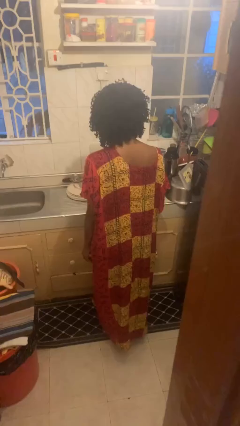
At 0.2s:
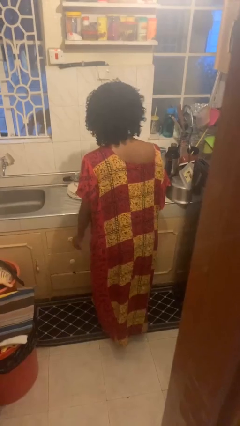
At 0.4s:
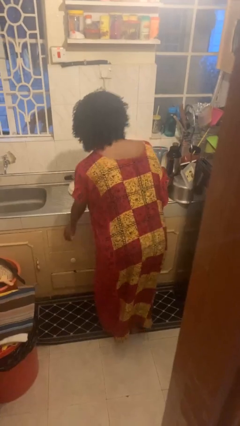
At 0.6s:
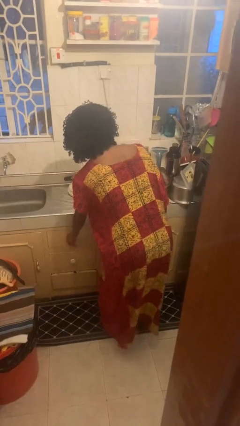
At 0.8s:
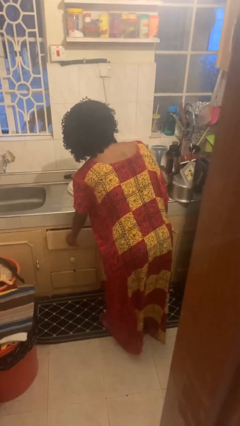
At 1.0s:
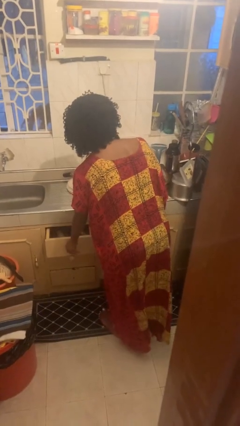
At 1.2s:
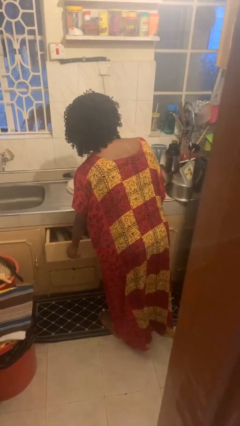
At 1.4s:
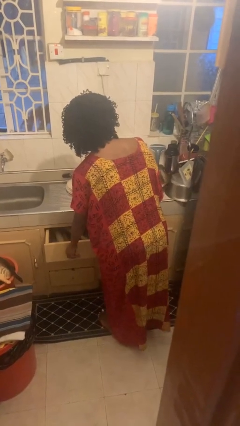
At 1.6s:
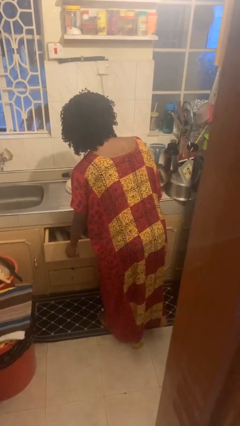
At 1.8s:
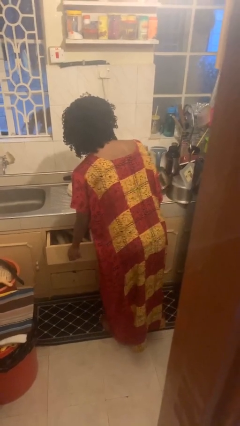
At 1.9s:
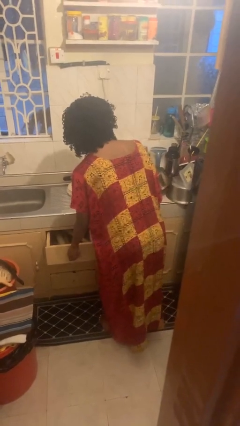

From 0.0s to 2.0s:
person opens kitchen drawer

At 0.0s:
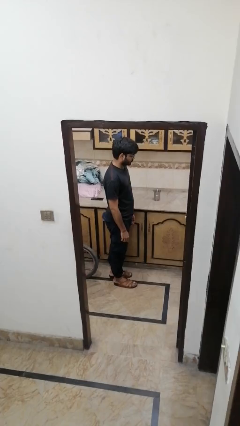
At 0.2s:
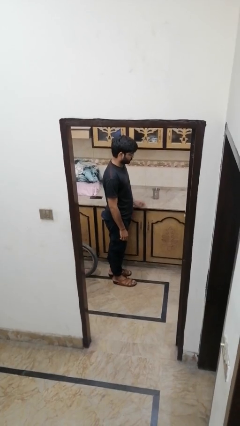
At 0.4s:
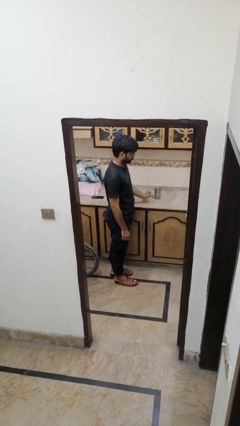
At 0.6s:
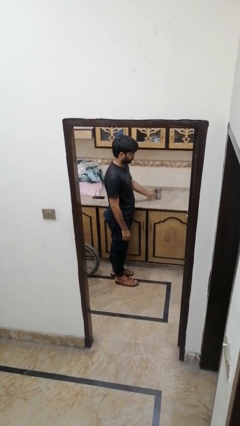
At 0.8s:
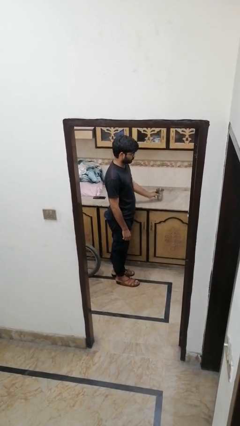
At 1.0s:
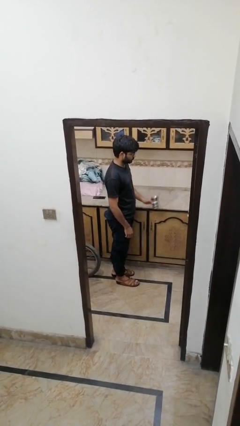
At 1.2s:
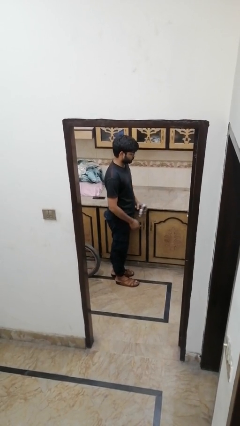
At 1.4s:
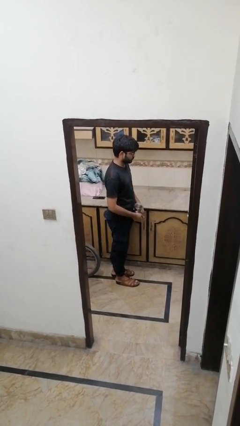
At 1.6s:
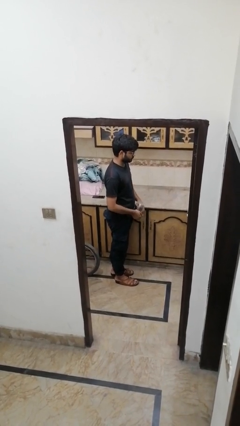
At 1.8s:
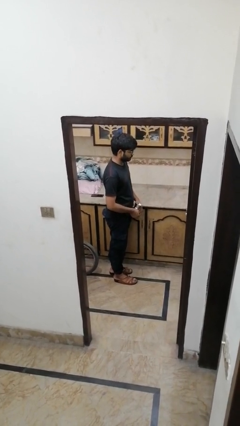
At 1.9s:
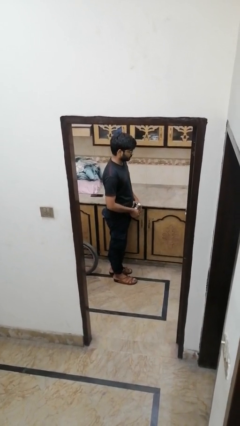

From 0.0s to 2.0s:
person picks up object from countertop

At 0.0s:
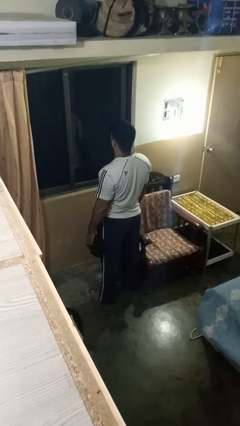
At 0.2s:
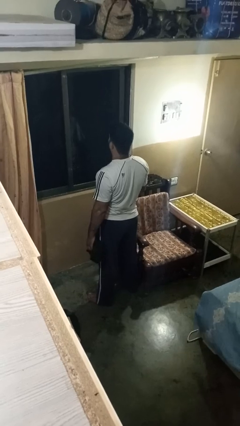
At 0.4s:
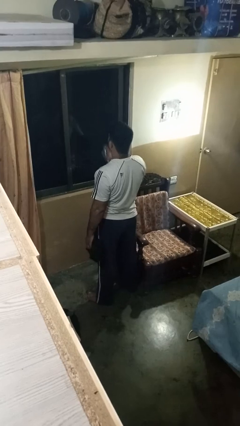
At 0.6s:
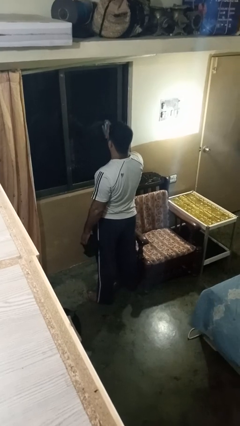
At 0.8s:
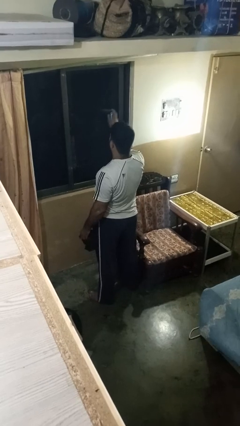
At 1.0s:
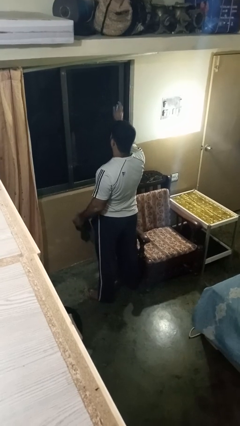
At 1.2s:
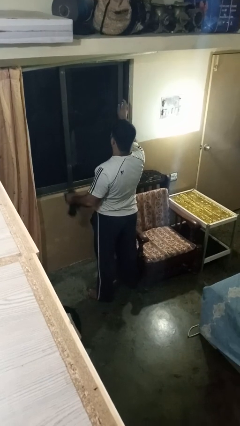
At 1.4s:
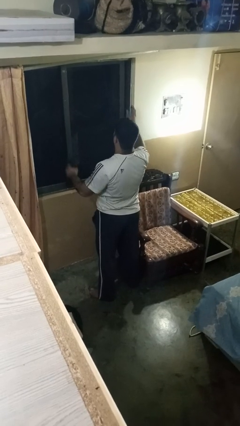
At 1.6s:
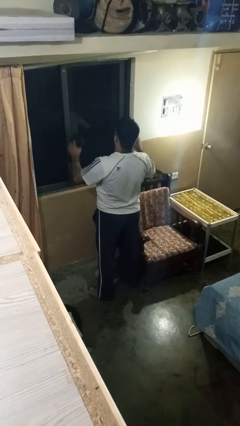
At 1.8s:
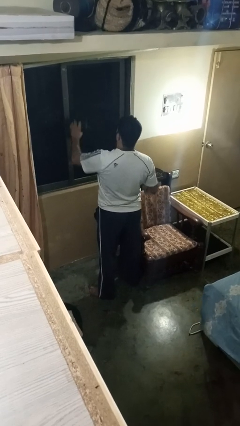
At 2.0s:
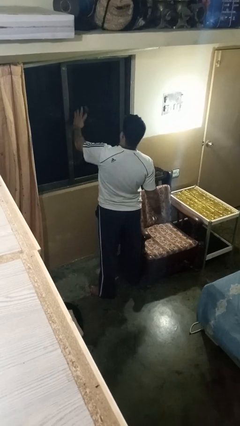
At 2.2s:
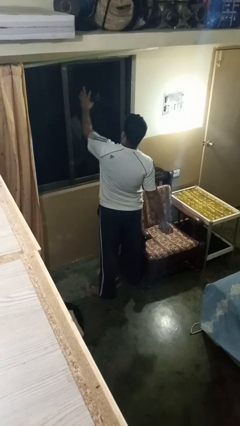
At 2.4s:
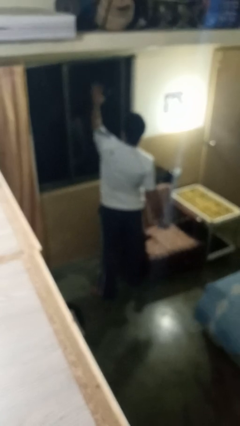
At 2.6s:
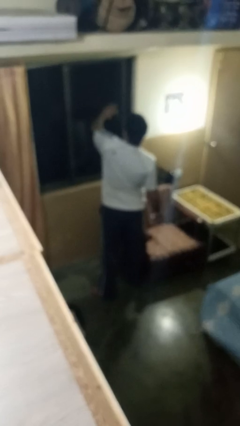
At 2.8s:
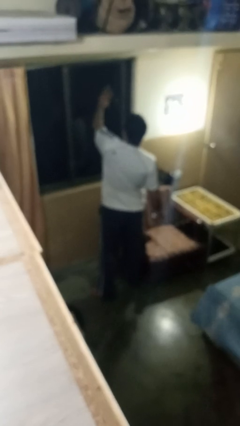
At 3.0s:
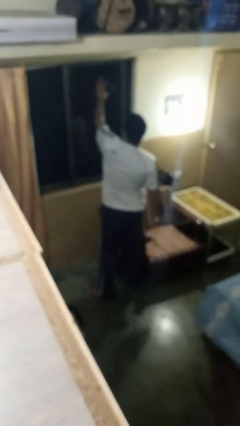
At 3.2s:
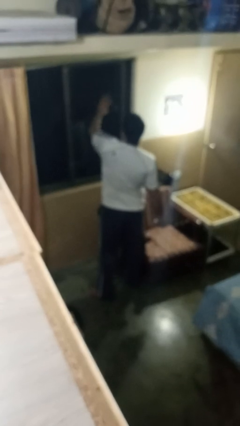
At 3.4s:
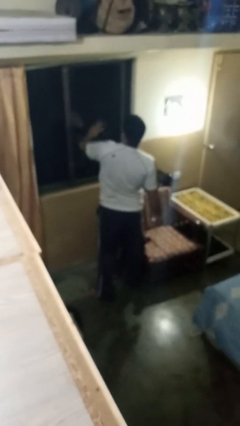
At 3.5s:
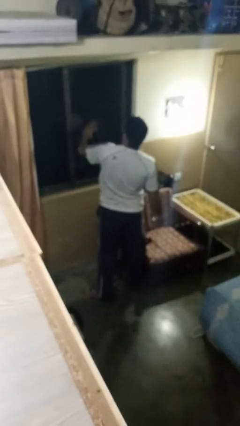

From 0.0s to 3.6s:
person sprays from bottle

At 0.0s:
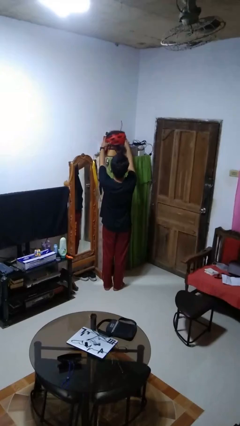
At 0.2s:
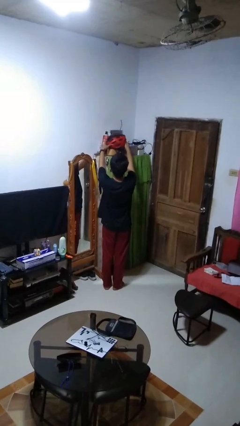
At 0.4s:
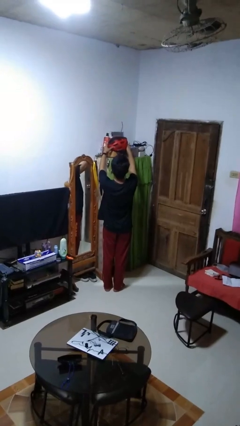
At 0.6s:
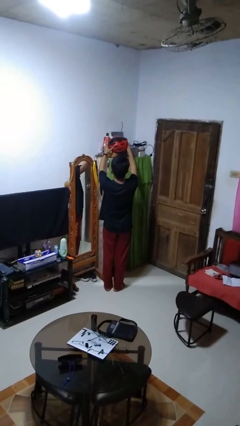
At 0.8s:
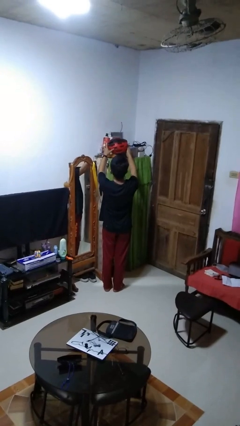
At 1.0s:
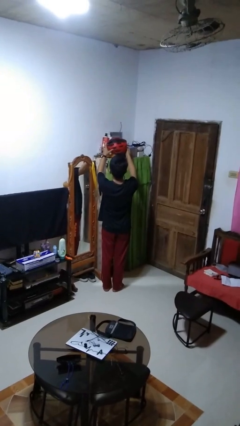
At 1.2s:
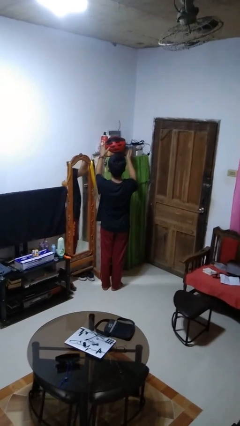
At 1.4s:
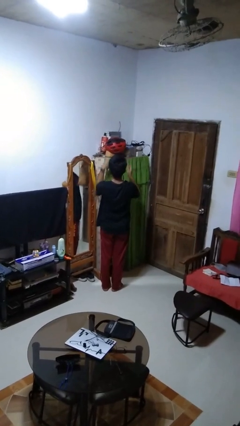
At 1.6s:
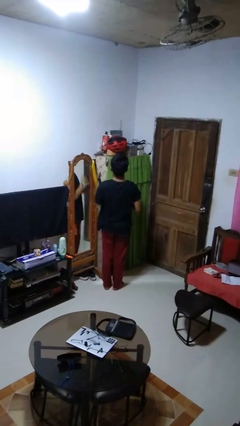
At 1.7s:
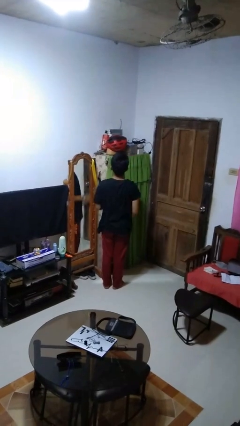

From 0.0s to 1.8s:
person puts down object on shelf

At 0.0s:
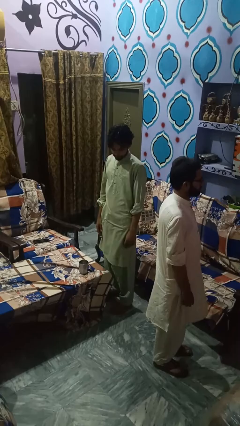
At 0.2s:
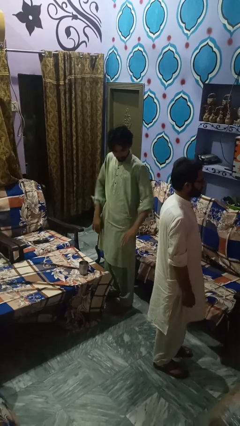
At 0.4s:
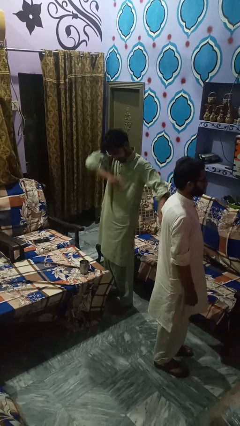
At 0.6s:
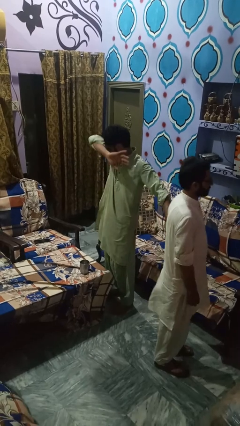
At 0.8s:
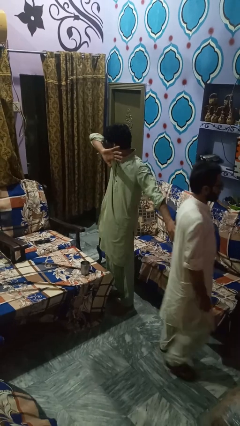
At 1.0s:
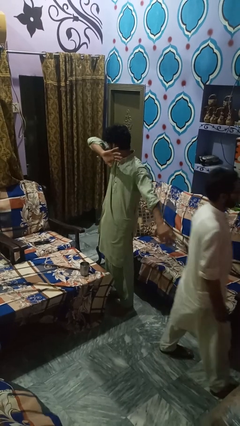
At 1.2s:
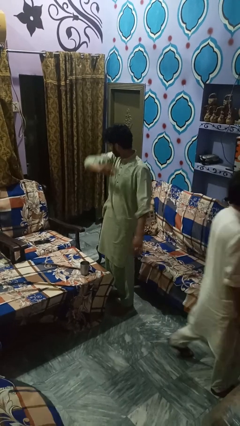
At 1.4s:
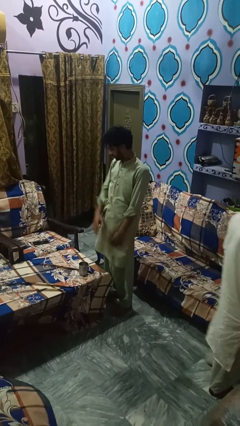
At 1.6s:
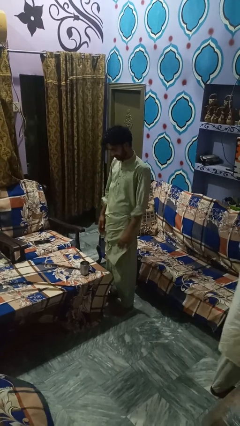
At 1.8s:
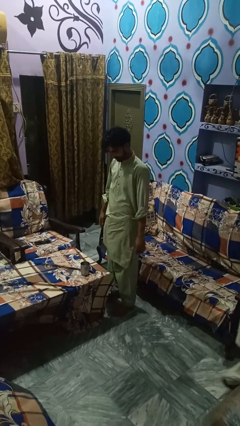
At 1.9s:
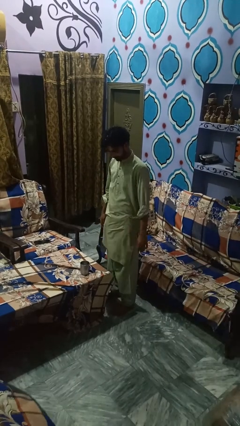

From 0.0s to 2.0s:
person shoves person

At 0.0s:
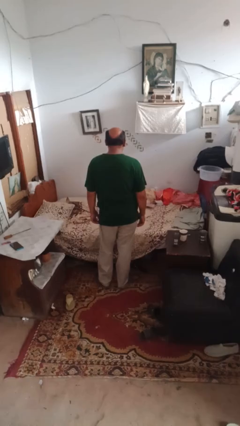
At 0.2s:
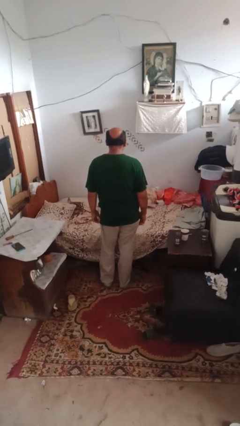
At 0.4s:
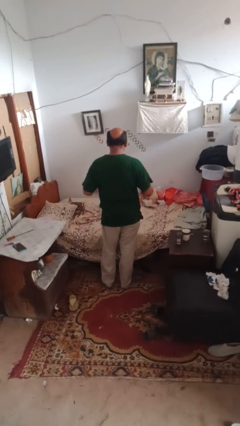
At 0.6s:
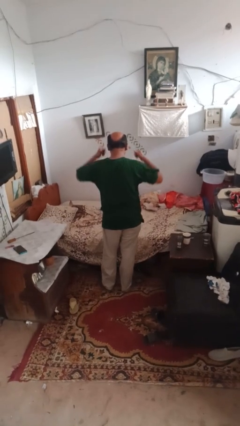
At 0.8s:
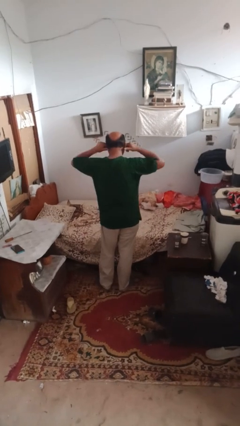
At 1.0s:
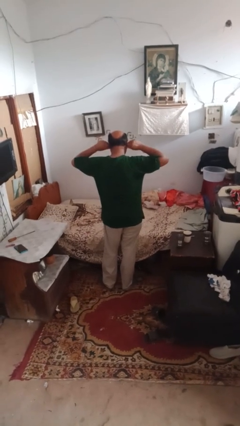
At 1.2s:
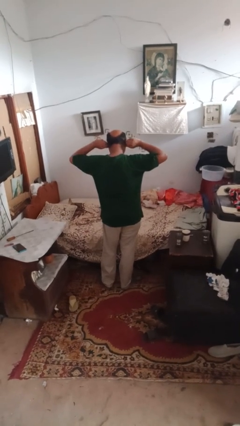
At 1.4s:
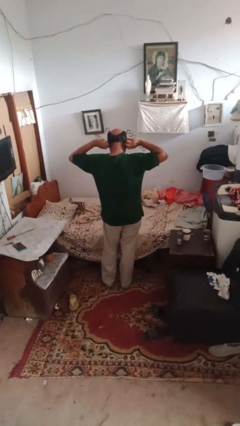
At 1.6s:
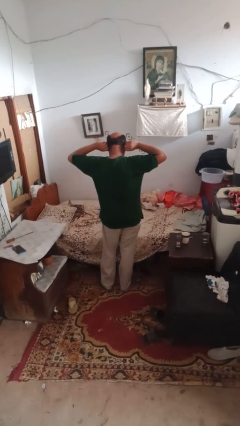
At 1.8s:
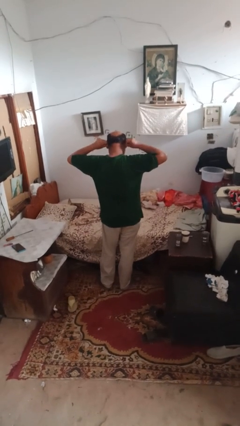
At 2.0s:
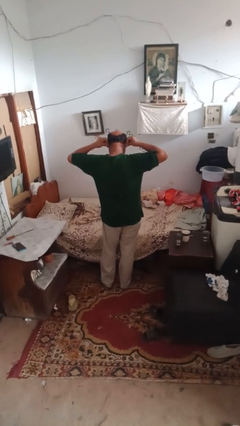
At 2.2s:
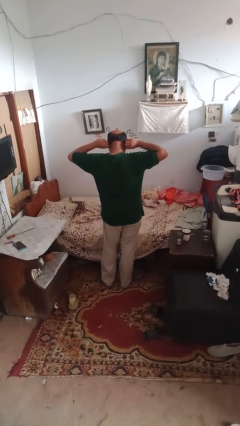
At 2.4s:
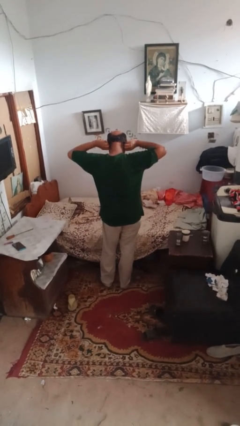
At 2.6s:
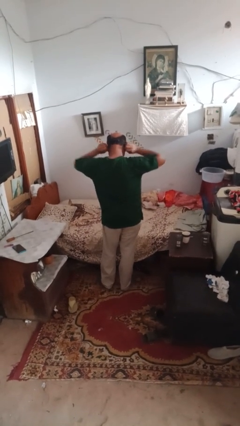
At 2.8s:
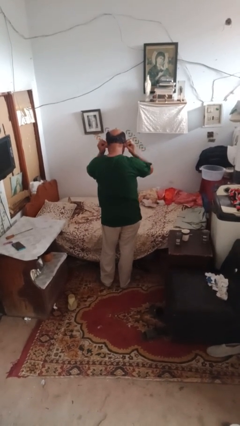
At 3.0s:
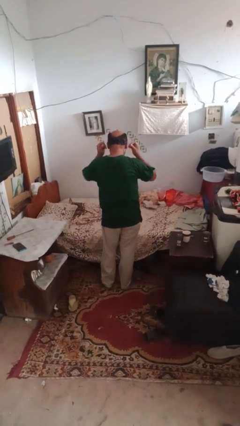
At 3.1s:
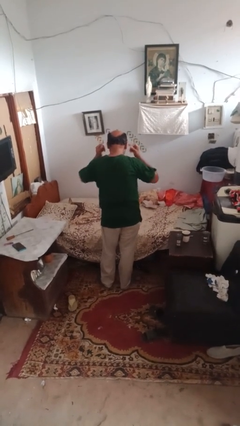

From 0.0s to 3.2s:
person touches earlobe

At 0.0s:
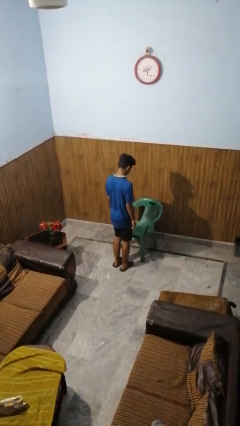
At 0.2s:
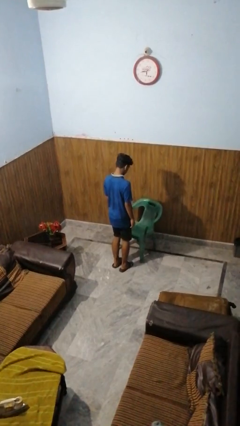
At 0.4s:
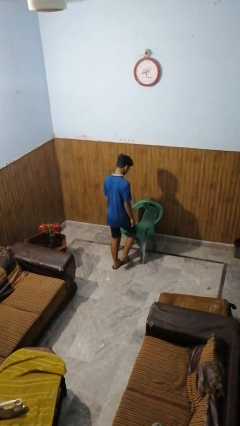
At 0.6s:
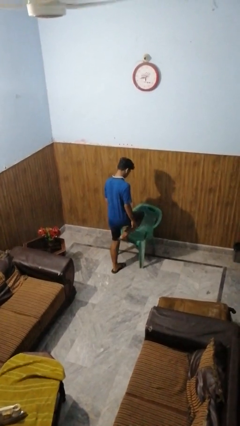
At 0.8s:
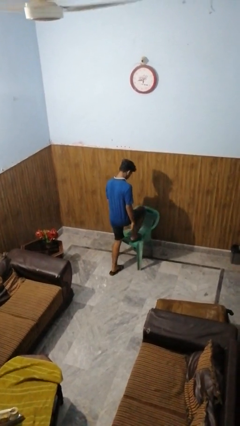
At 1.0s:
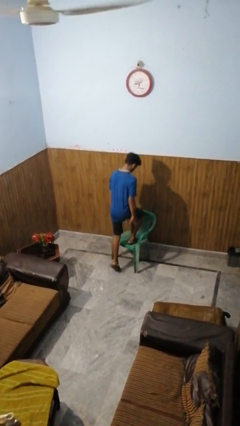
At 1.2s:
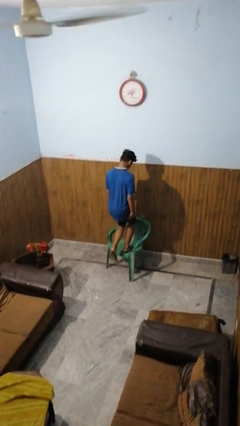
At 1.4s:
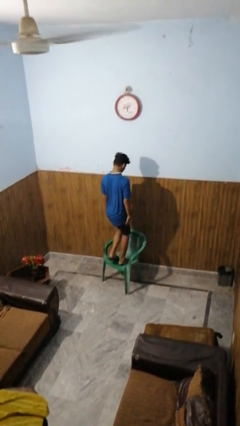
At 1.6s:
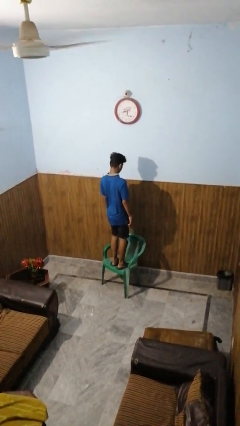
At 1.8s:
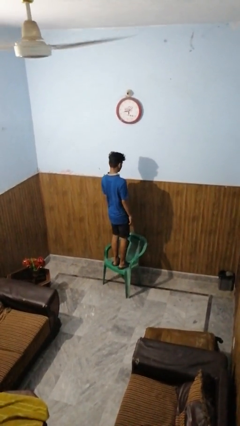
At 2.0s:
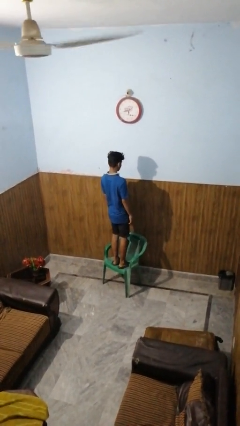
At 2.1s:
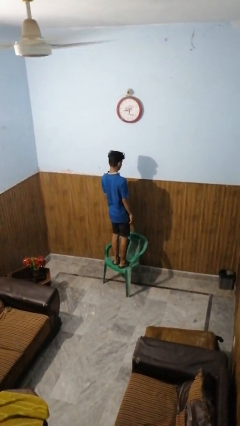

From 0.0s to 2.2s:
person climbs on chair
